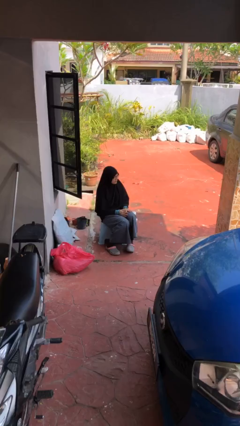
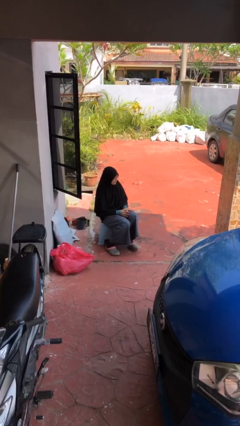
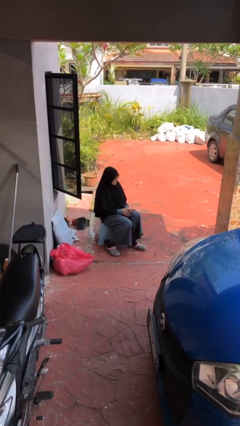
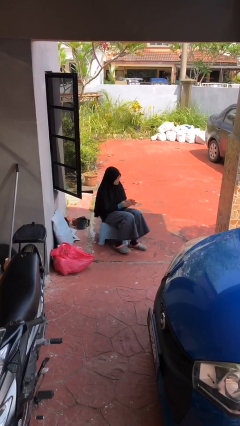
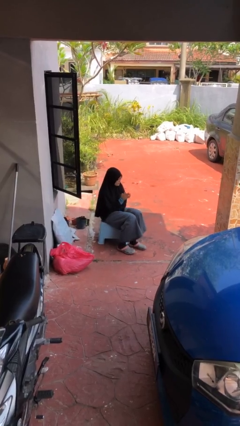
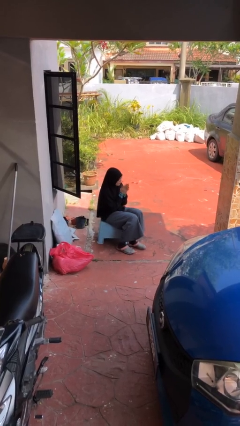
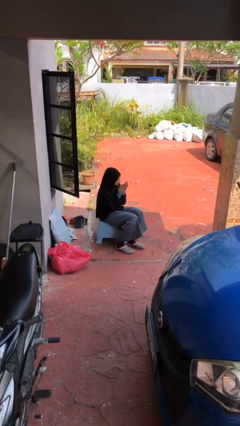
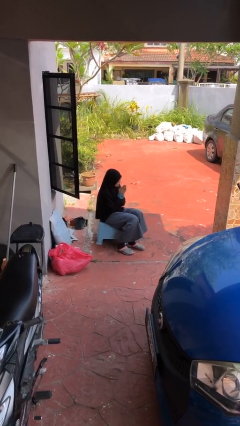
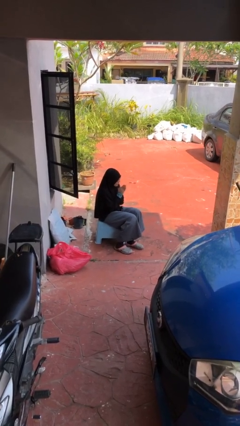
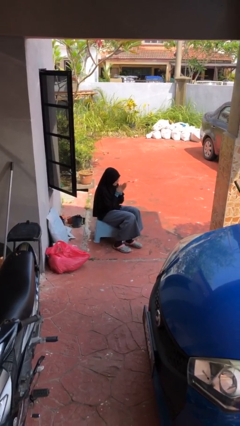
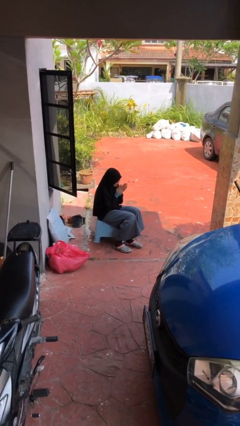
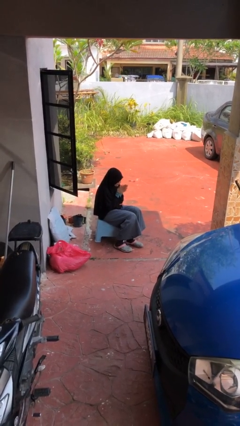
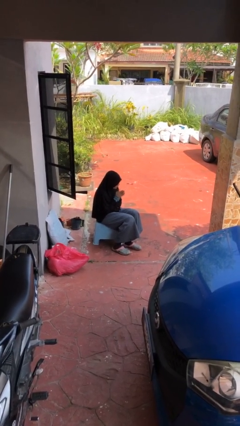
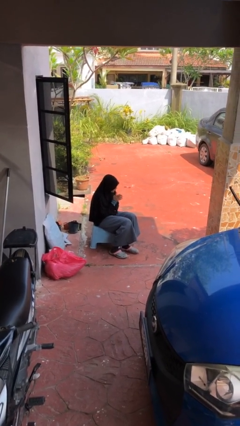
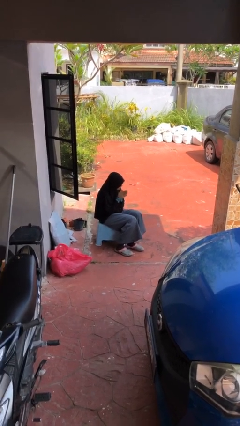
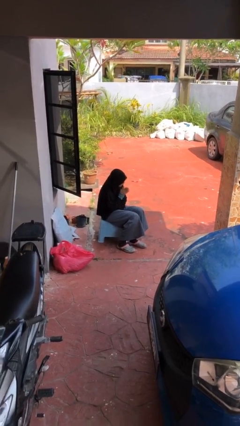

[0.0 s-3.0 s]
person blows into hands

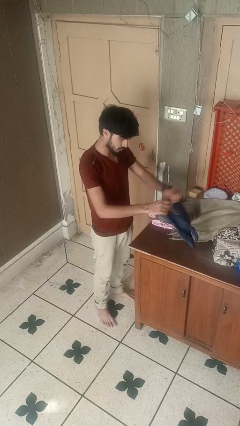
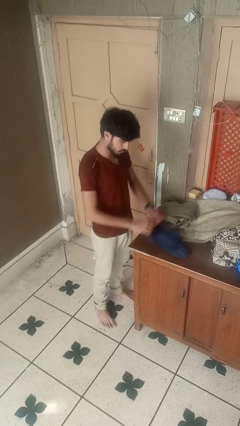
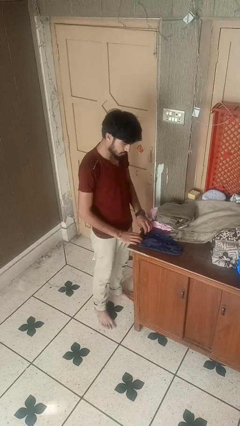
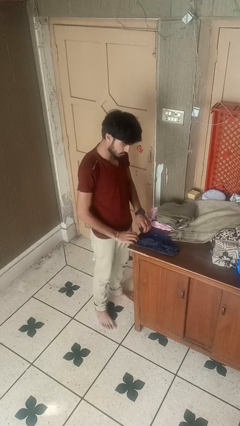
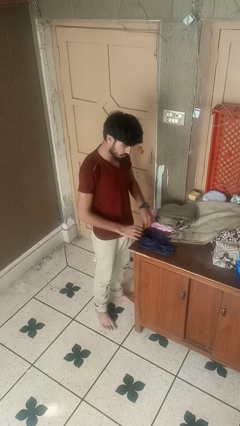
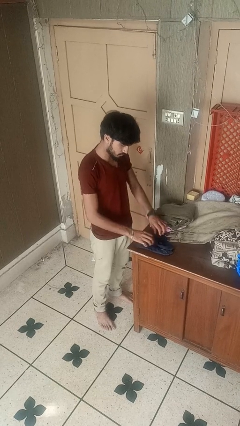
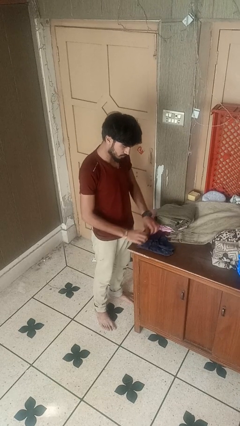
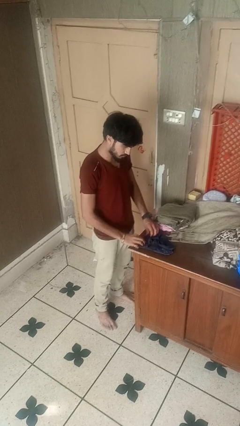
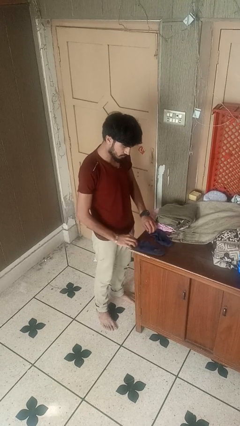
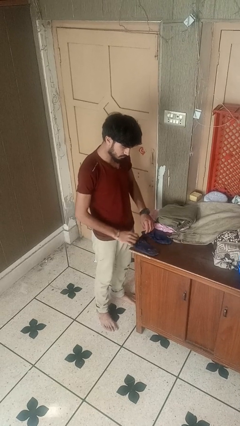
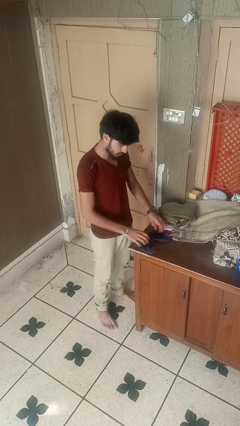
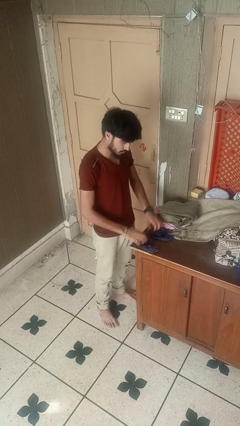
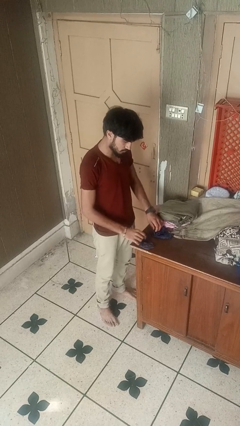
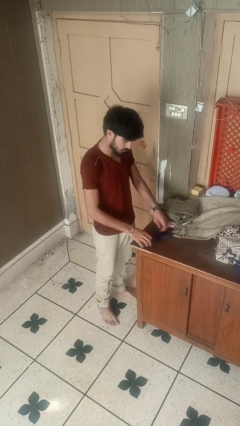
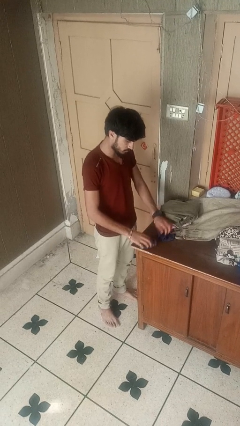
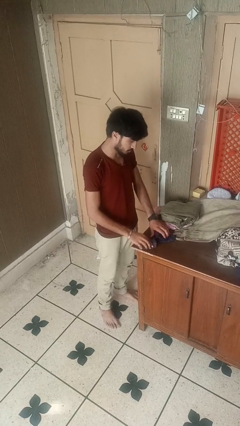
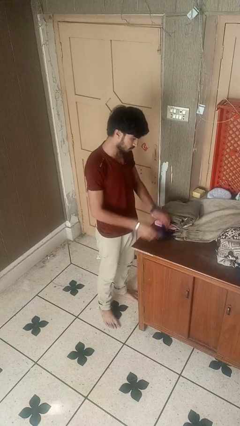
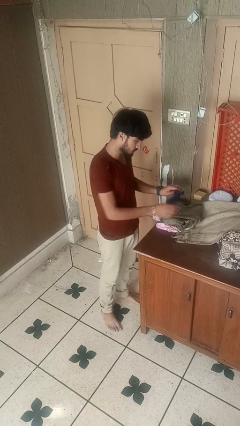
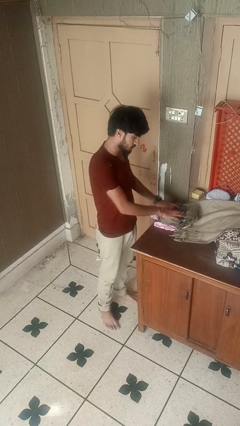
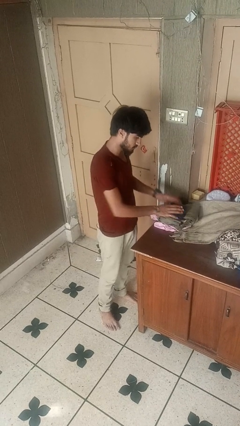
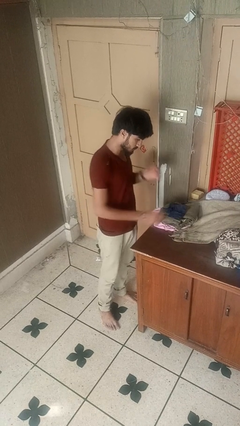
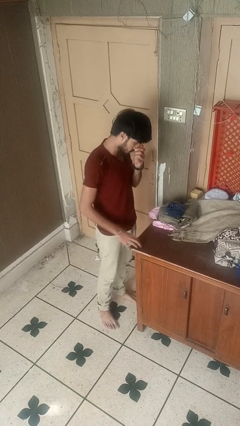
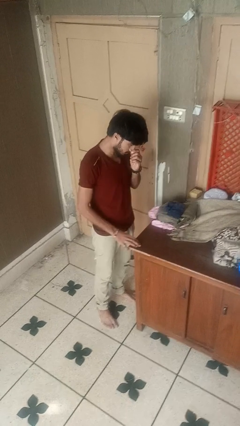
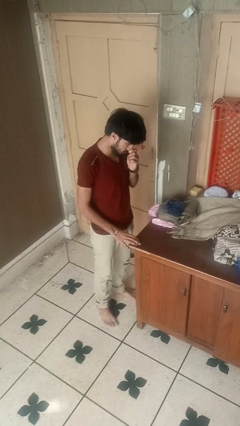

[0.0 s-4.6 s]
person folds socks

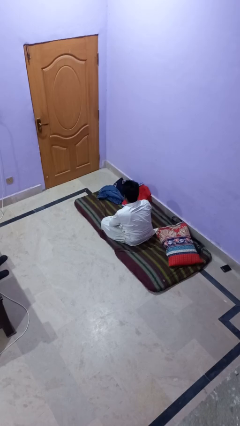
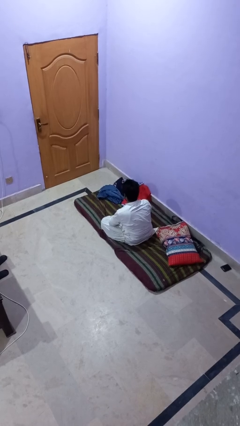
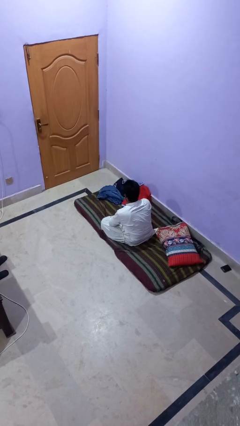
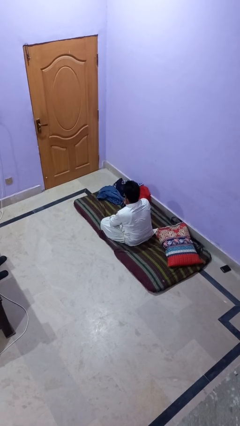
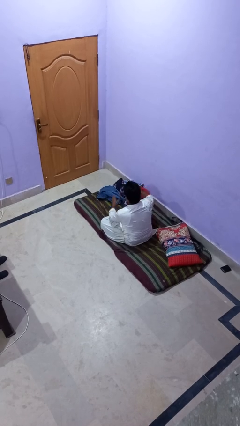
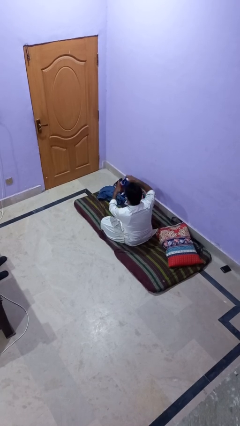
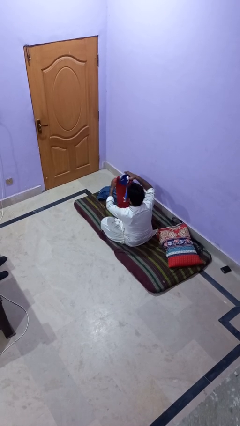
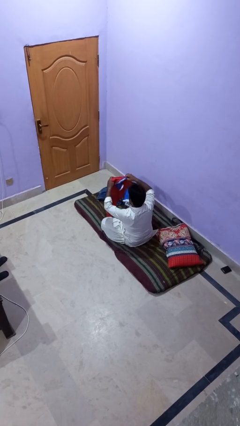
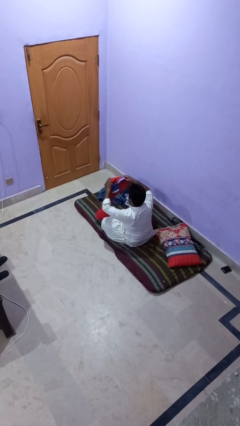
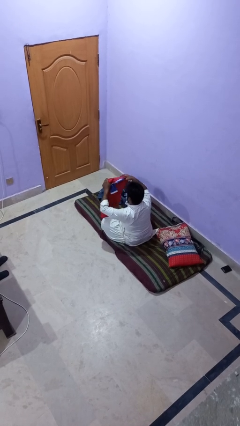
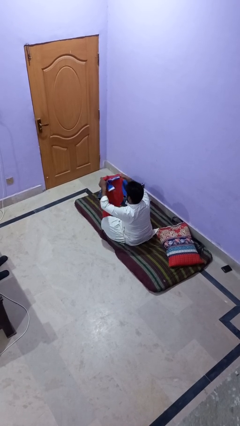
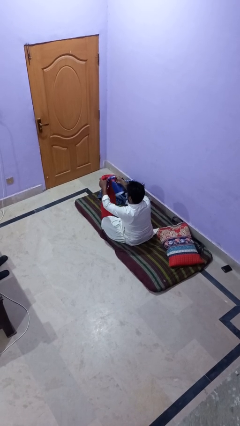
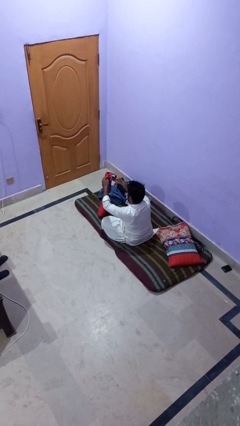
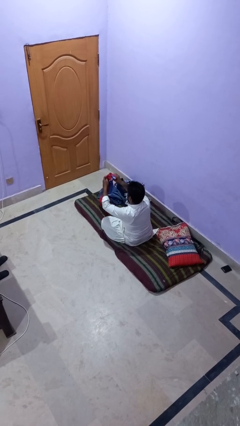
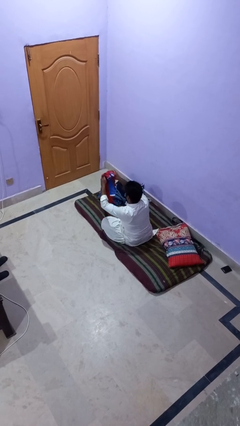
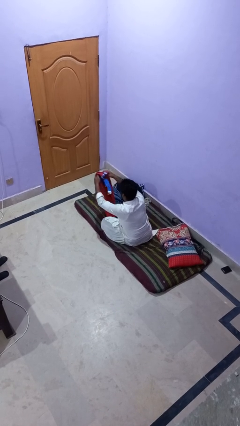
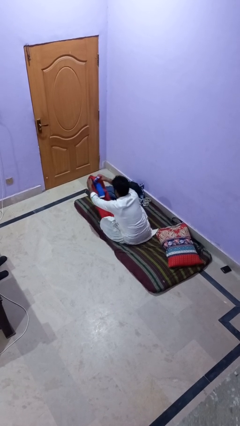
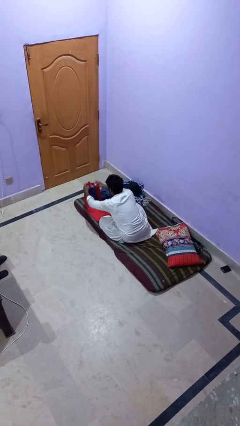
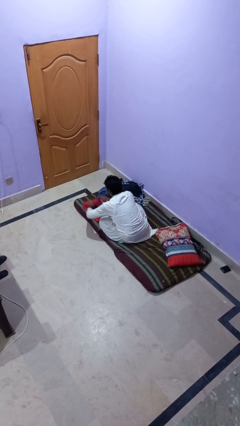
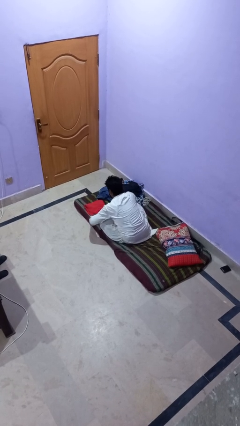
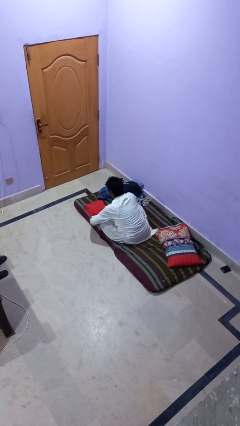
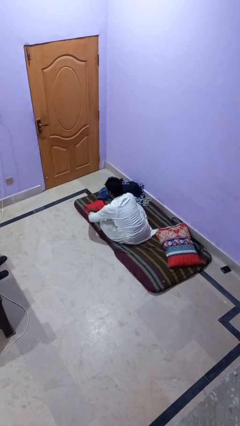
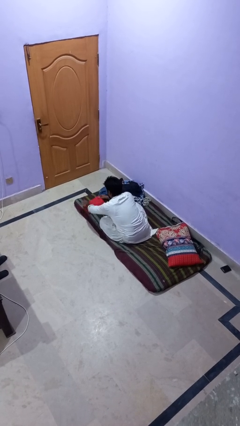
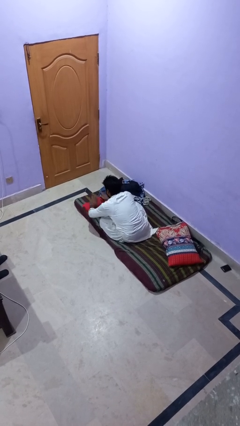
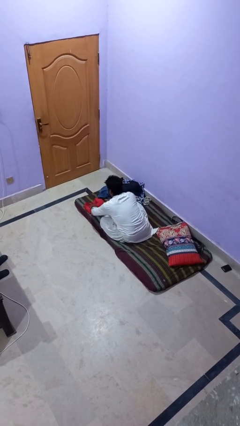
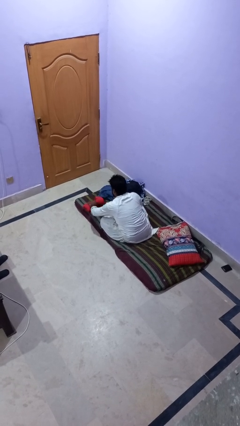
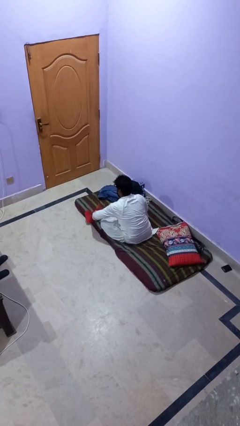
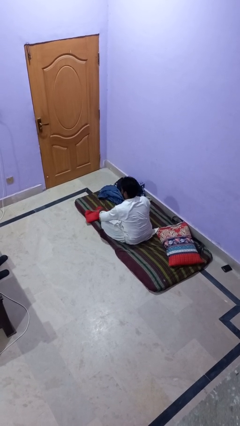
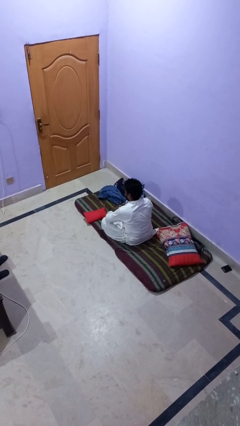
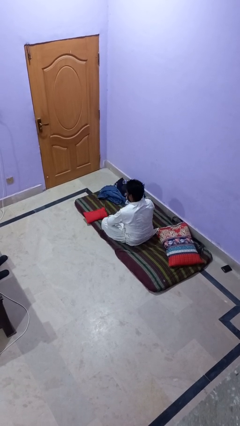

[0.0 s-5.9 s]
person folds shirt

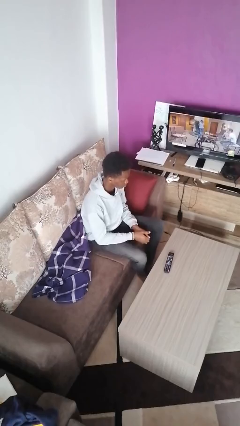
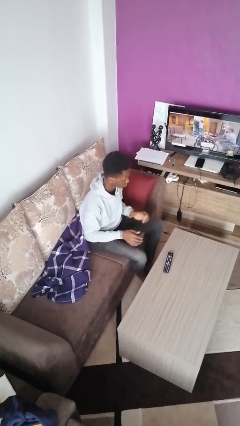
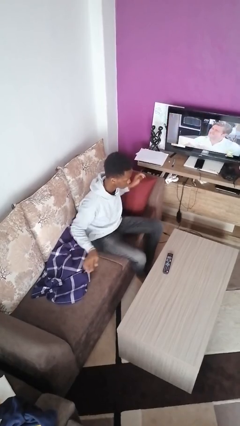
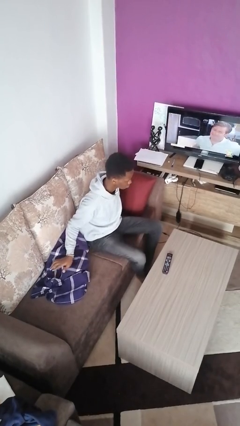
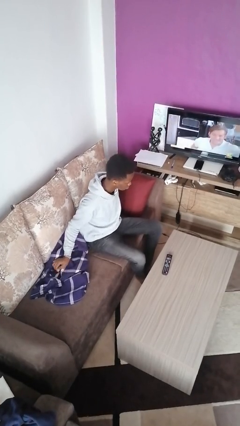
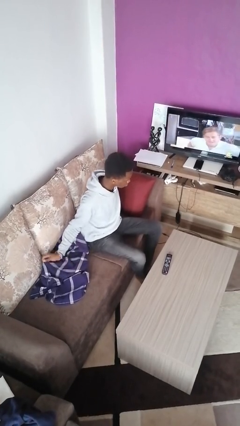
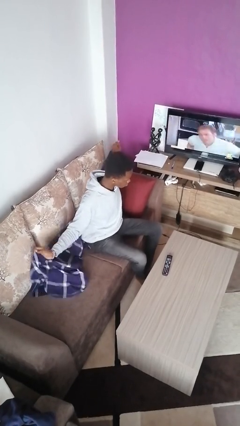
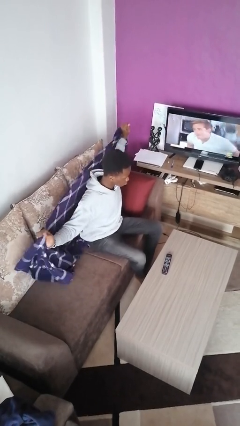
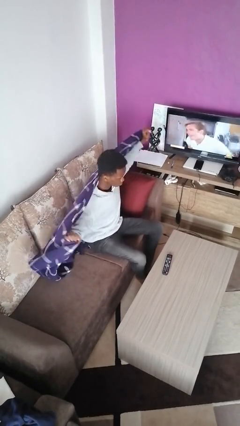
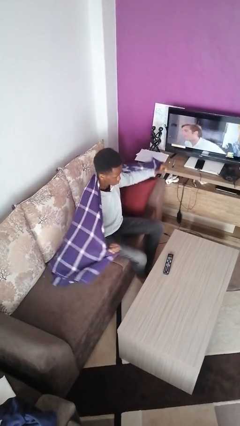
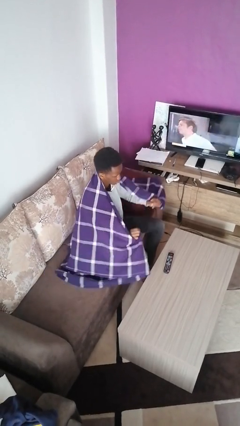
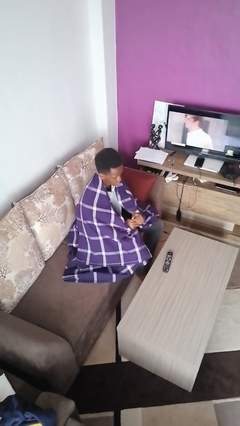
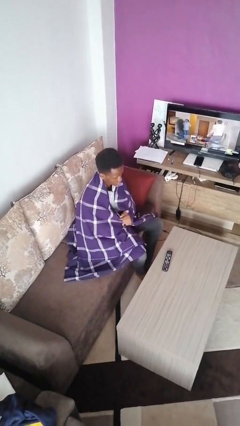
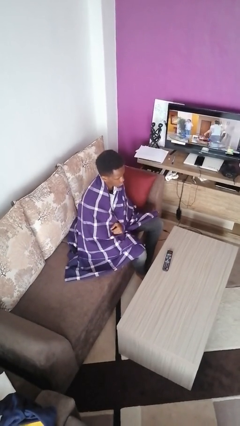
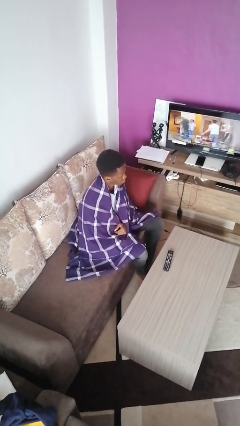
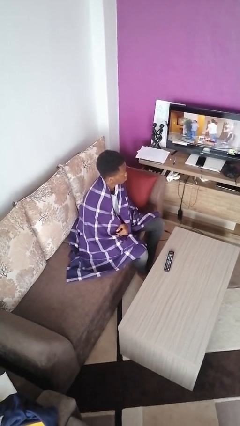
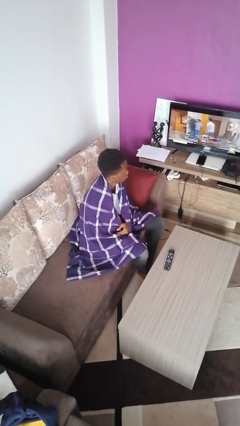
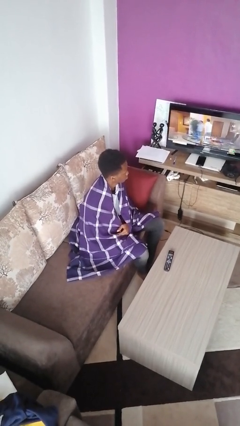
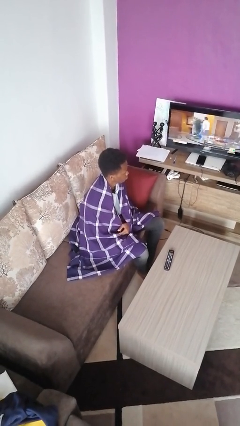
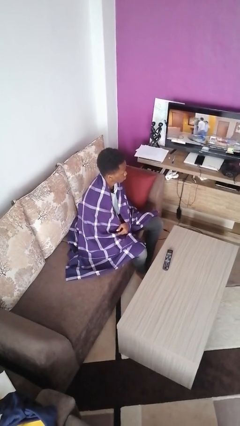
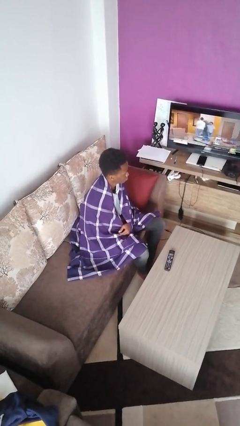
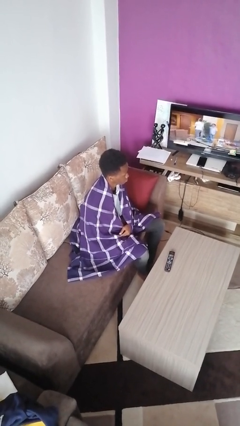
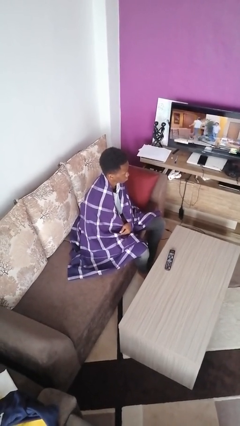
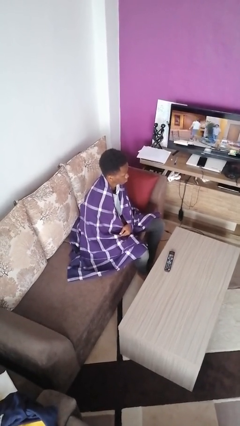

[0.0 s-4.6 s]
person covers with blanket
